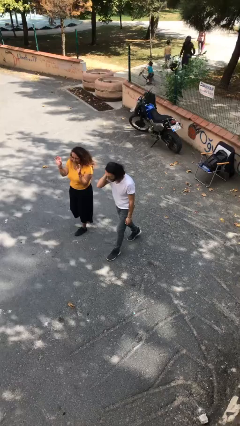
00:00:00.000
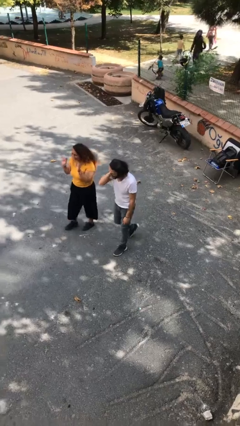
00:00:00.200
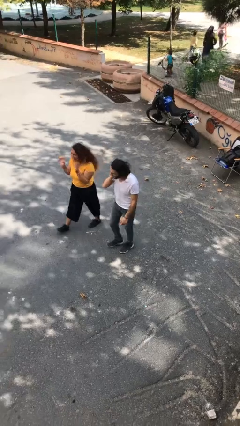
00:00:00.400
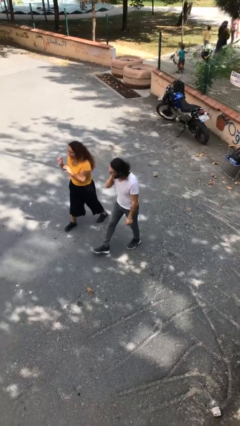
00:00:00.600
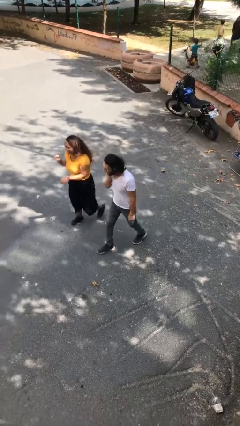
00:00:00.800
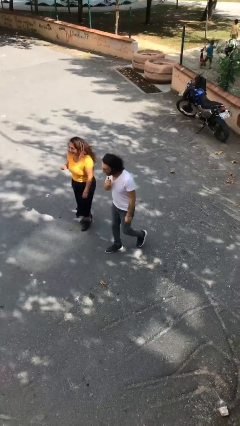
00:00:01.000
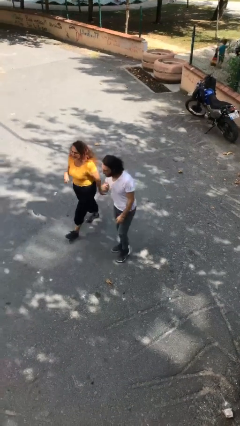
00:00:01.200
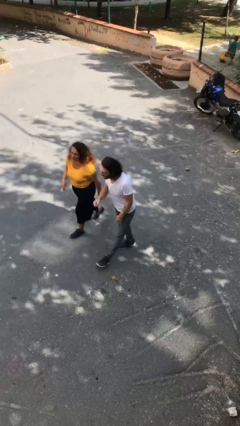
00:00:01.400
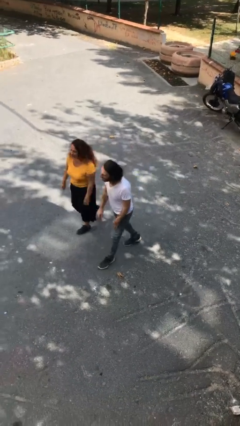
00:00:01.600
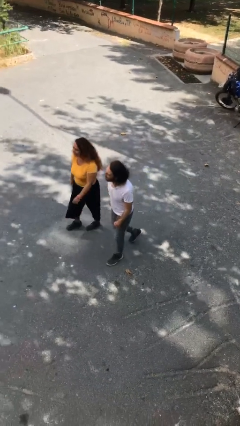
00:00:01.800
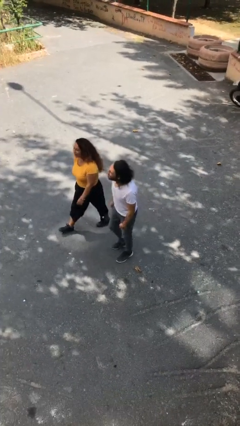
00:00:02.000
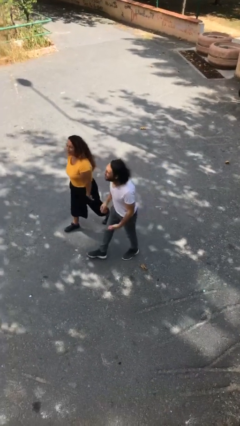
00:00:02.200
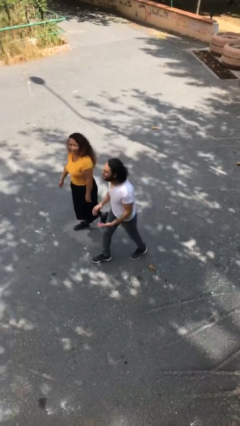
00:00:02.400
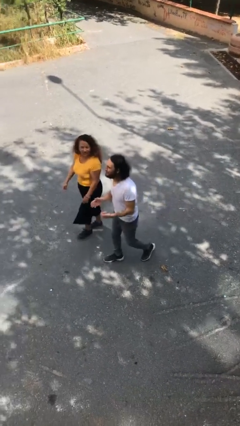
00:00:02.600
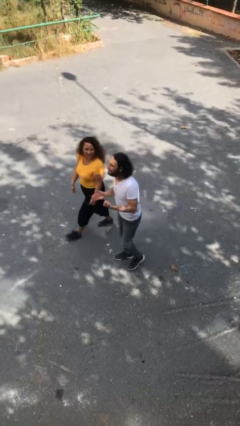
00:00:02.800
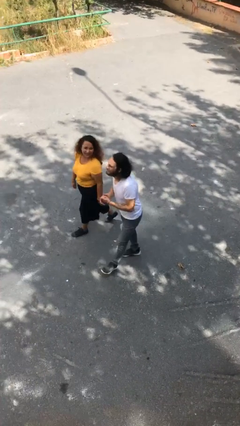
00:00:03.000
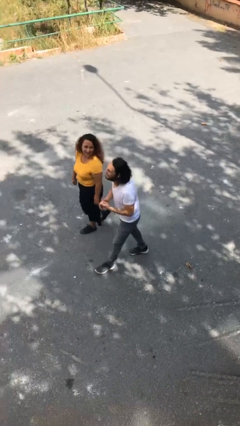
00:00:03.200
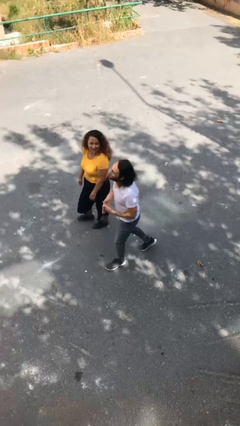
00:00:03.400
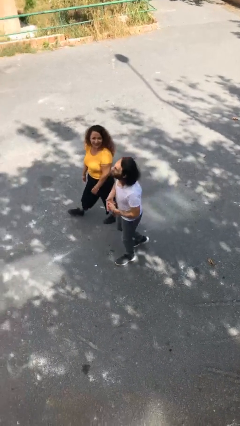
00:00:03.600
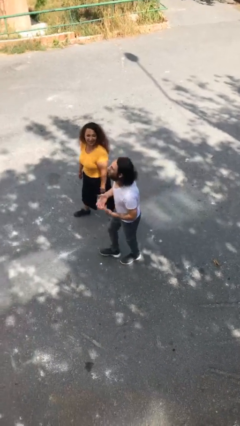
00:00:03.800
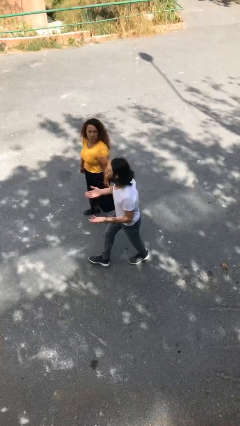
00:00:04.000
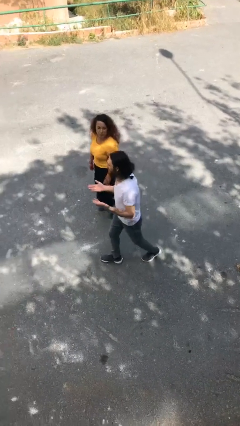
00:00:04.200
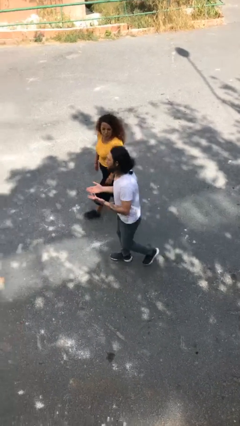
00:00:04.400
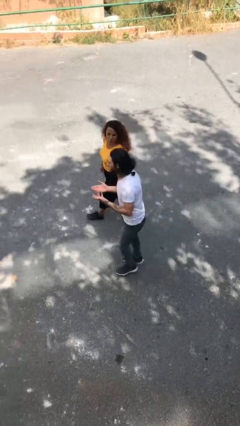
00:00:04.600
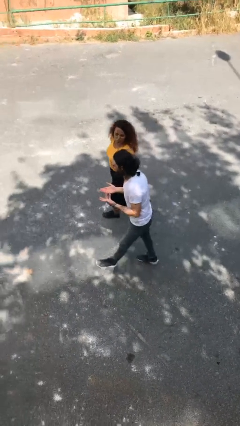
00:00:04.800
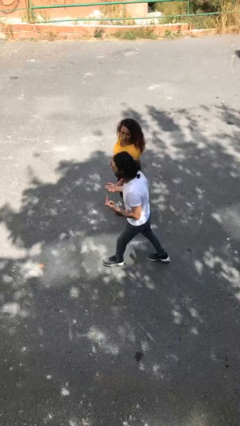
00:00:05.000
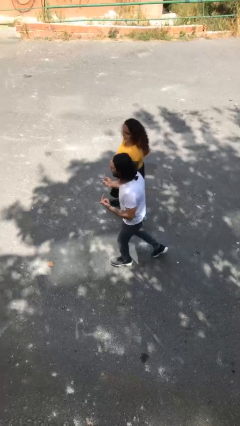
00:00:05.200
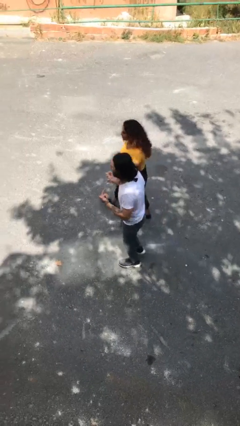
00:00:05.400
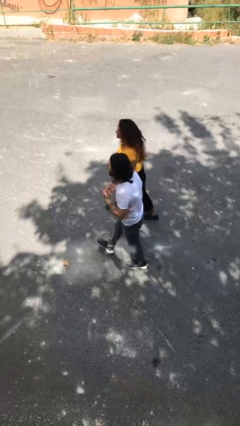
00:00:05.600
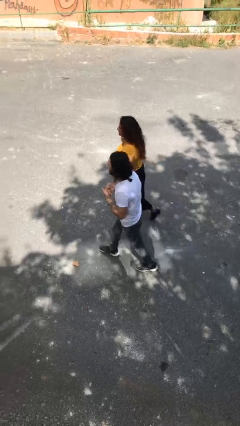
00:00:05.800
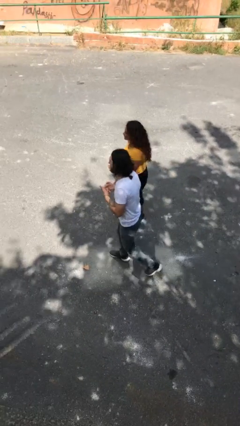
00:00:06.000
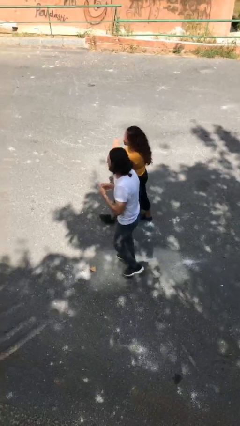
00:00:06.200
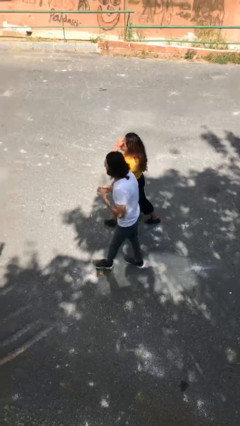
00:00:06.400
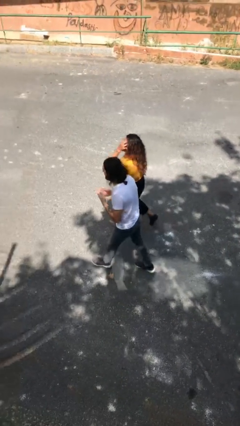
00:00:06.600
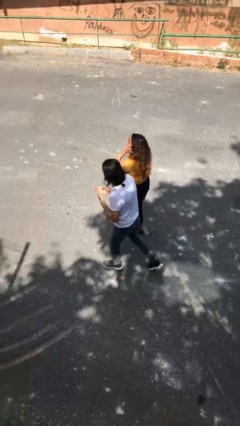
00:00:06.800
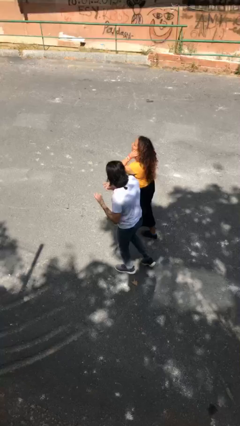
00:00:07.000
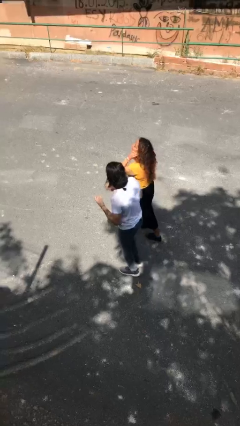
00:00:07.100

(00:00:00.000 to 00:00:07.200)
person talks to person

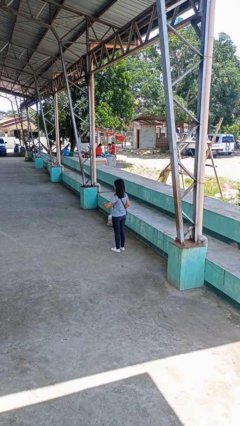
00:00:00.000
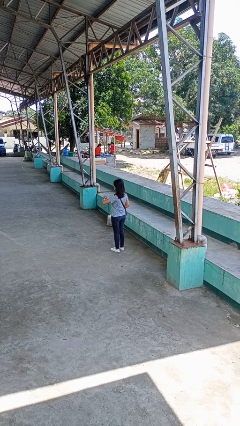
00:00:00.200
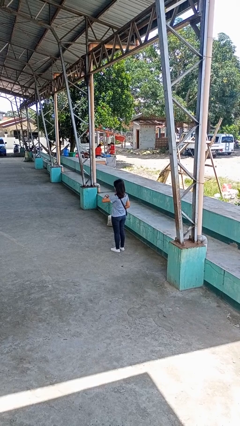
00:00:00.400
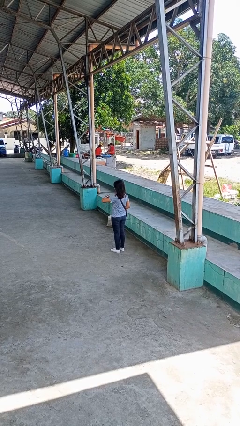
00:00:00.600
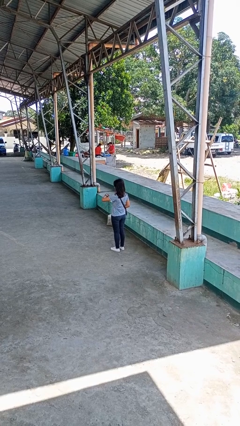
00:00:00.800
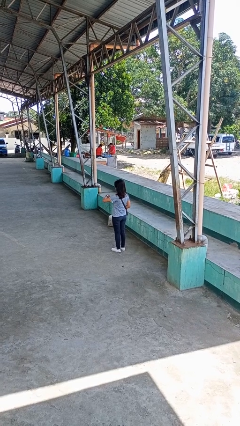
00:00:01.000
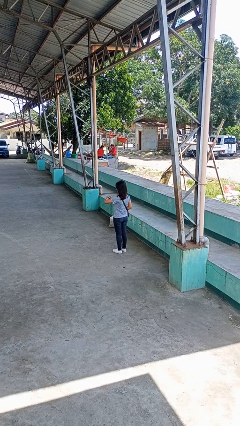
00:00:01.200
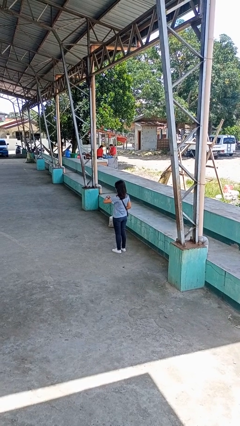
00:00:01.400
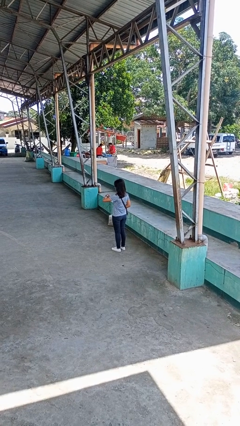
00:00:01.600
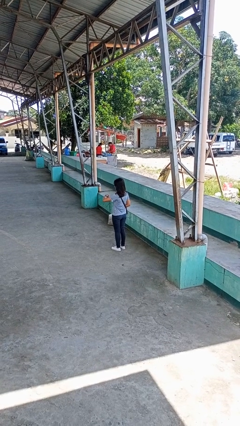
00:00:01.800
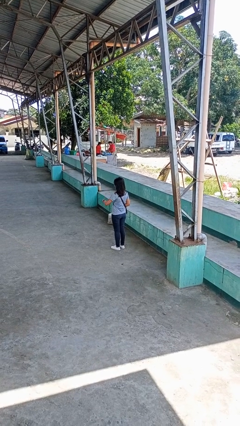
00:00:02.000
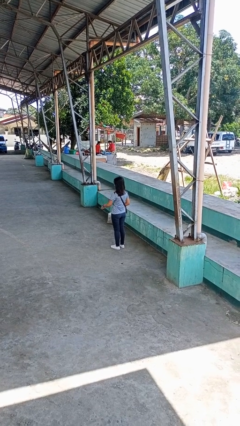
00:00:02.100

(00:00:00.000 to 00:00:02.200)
person looks at wristwatch

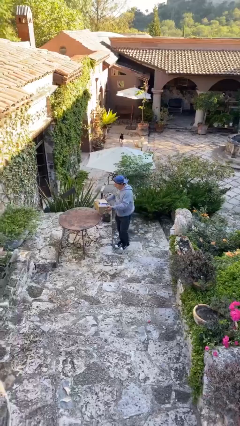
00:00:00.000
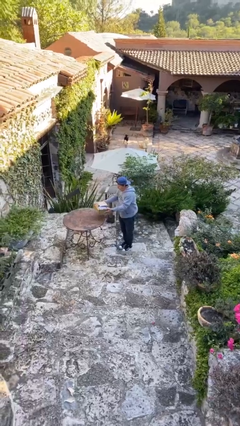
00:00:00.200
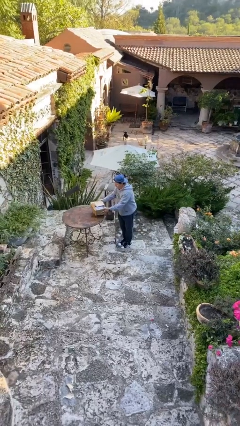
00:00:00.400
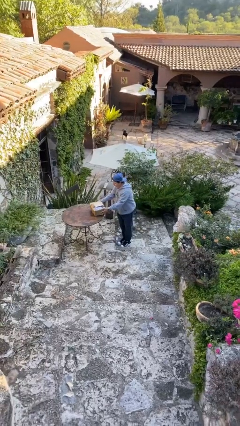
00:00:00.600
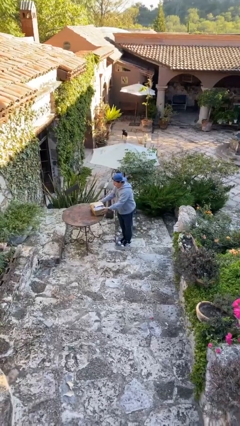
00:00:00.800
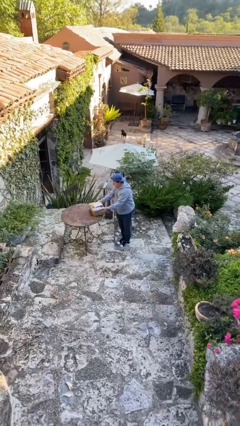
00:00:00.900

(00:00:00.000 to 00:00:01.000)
person puts down object on table

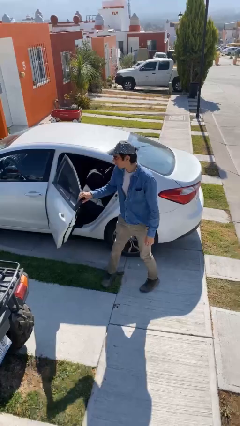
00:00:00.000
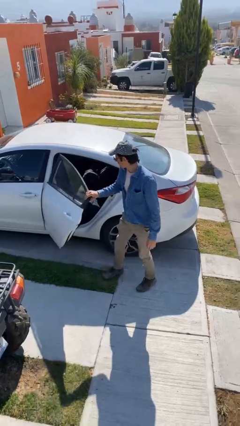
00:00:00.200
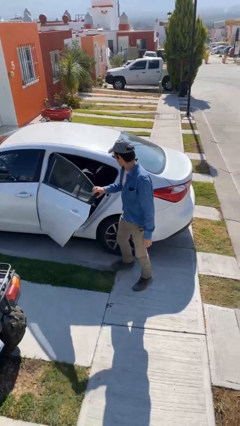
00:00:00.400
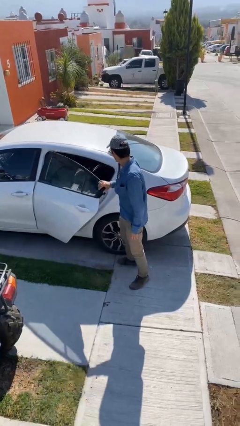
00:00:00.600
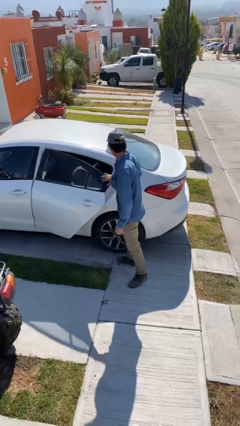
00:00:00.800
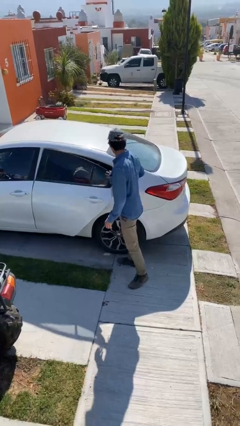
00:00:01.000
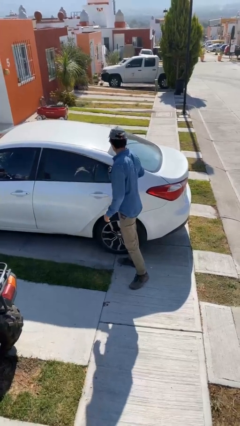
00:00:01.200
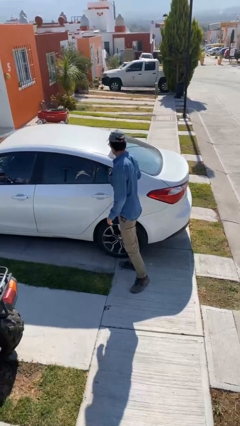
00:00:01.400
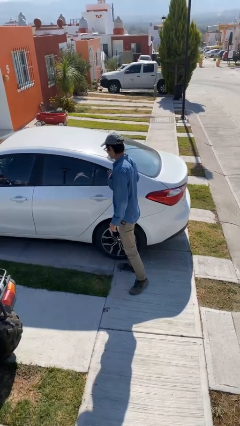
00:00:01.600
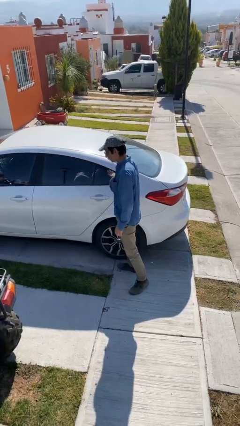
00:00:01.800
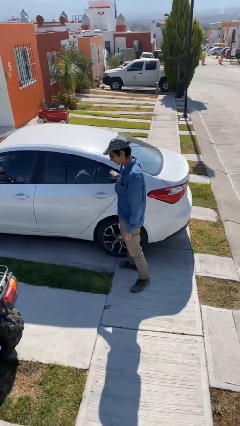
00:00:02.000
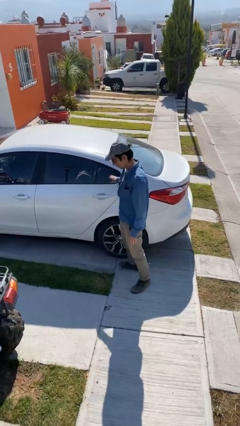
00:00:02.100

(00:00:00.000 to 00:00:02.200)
person closes car door

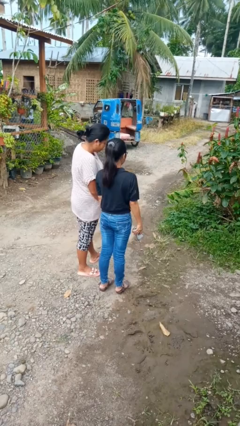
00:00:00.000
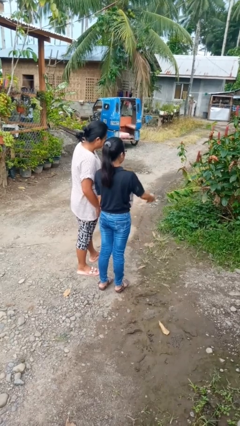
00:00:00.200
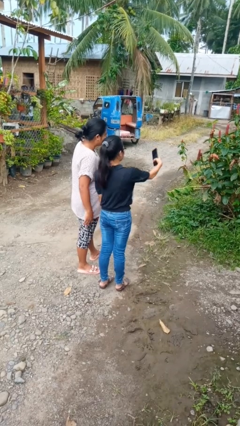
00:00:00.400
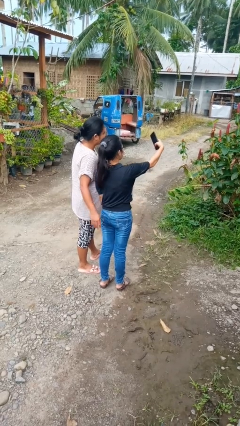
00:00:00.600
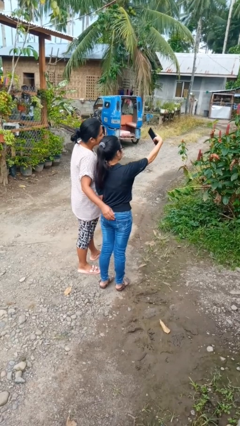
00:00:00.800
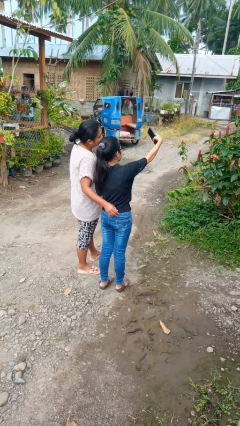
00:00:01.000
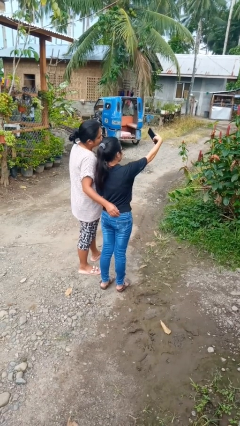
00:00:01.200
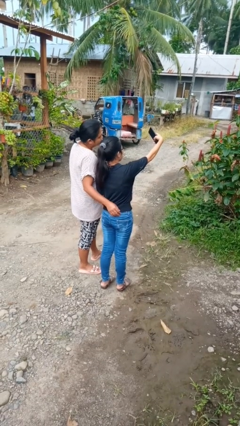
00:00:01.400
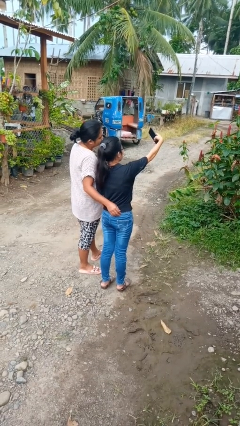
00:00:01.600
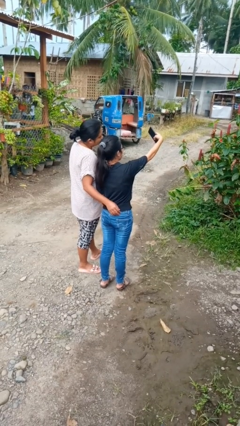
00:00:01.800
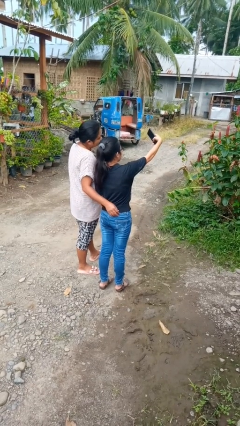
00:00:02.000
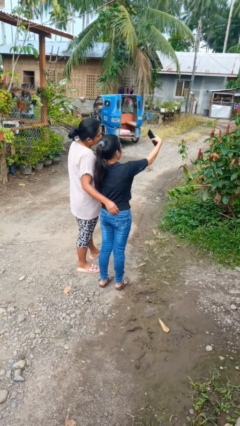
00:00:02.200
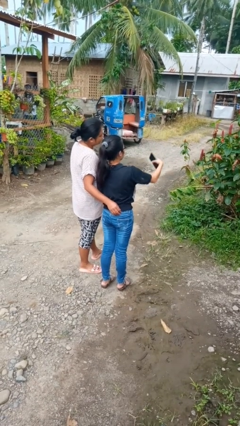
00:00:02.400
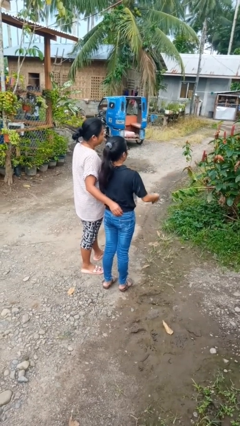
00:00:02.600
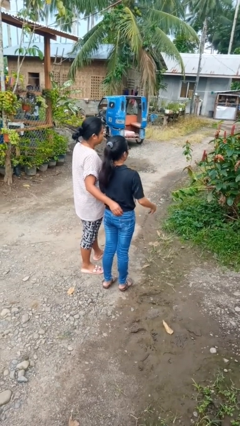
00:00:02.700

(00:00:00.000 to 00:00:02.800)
person takes selfie with person

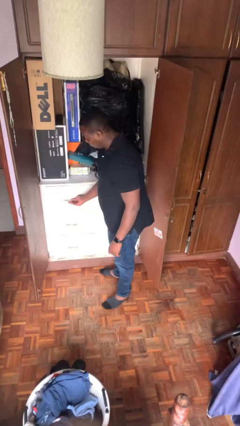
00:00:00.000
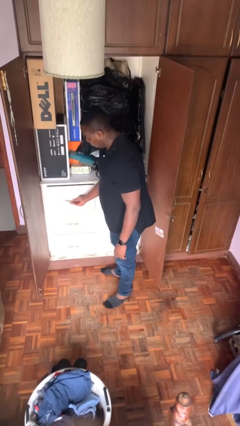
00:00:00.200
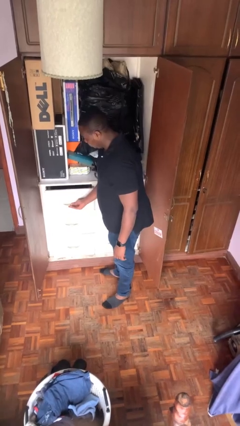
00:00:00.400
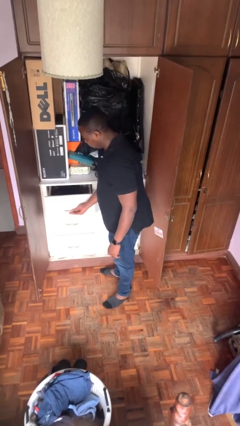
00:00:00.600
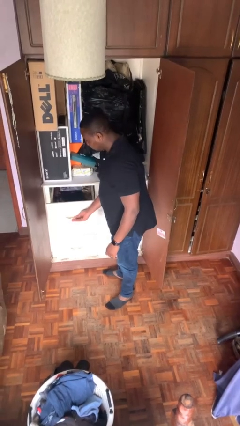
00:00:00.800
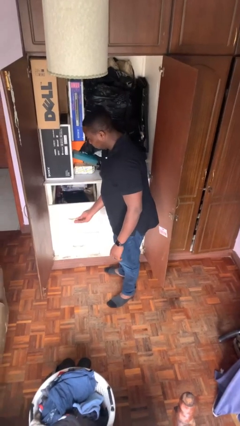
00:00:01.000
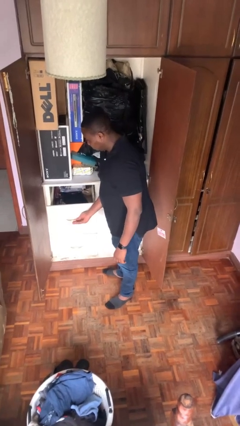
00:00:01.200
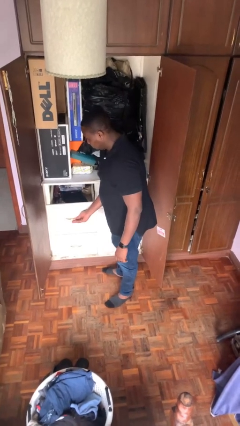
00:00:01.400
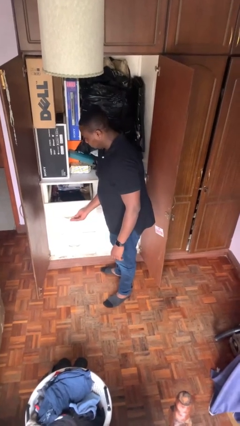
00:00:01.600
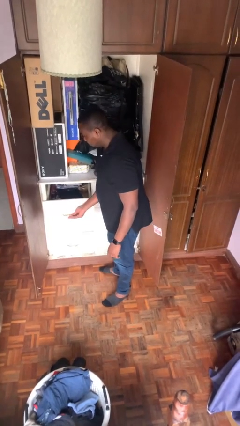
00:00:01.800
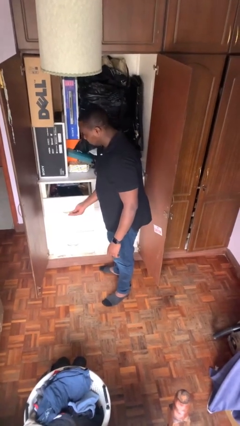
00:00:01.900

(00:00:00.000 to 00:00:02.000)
person opens dresser drawer
